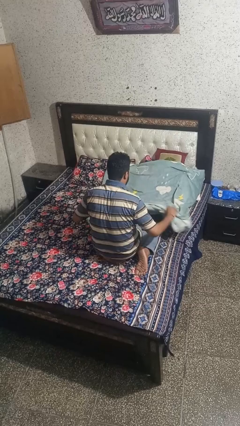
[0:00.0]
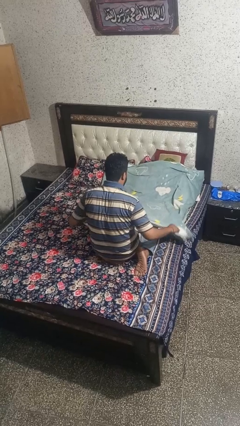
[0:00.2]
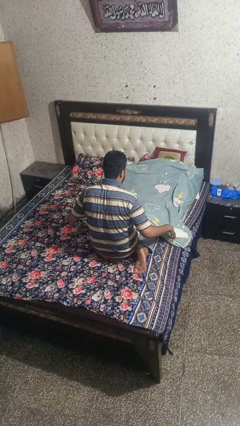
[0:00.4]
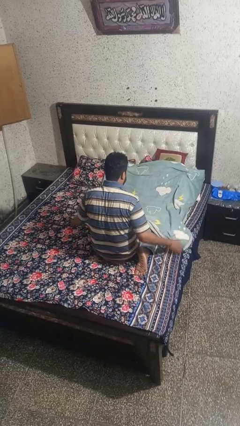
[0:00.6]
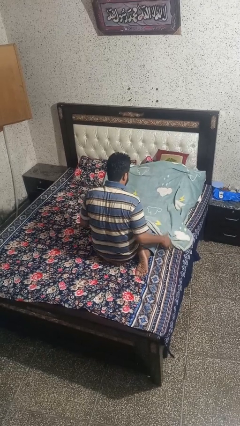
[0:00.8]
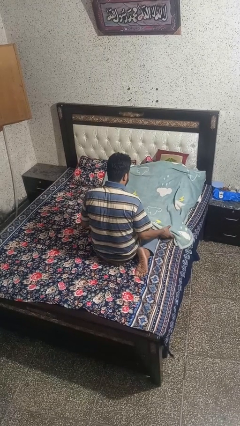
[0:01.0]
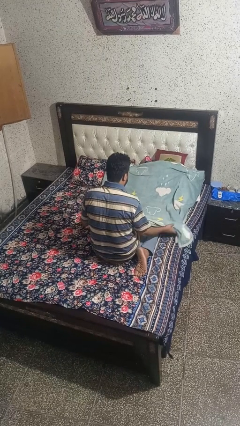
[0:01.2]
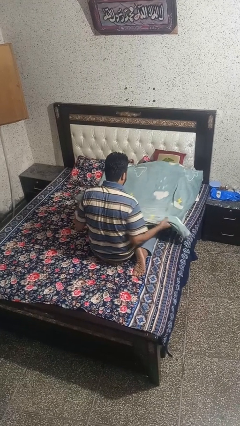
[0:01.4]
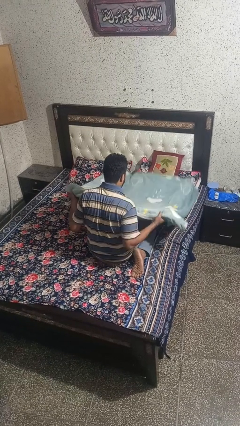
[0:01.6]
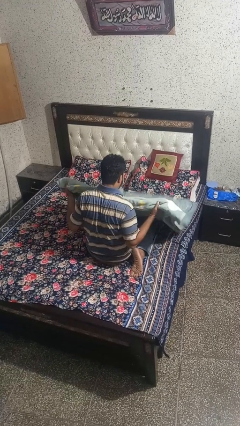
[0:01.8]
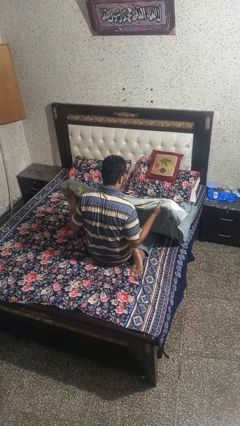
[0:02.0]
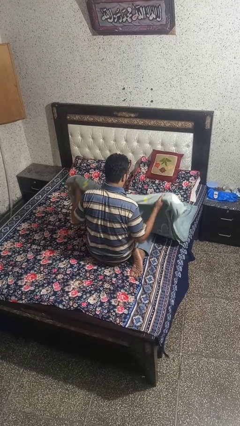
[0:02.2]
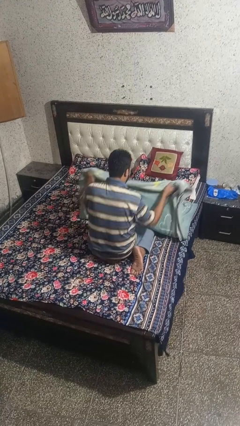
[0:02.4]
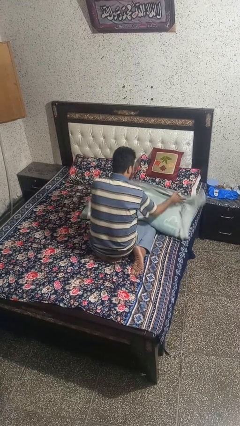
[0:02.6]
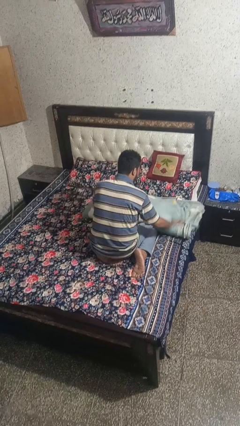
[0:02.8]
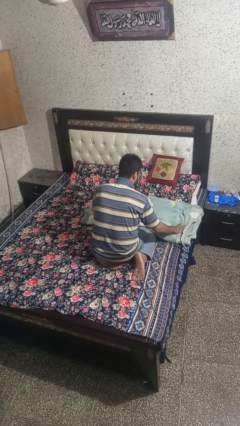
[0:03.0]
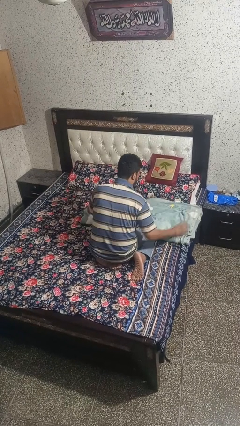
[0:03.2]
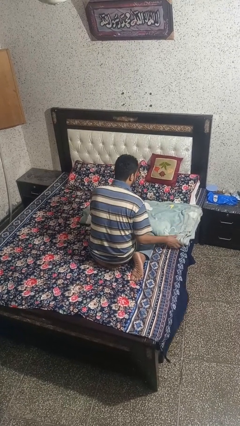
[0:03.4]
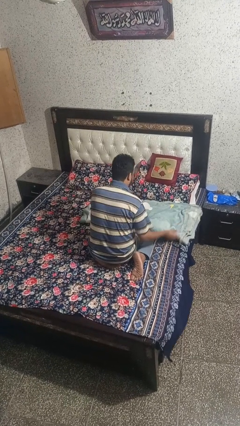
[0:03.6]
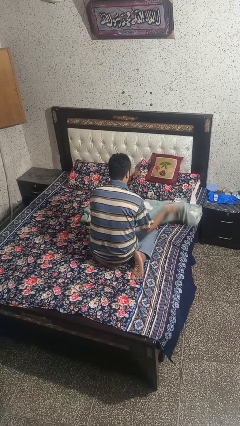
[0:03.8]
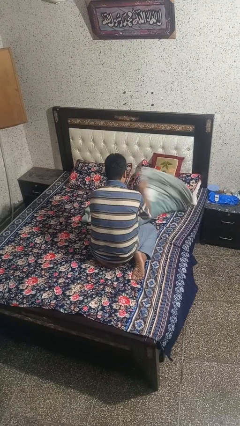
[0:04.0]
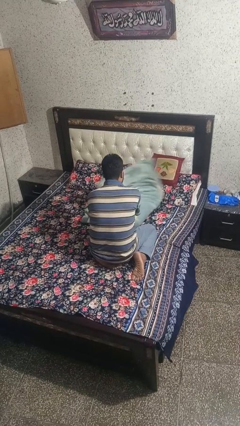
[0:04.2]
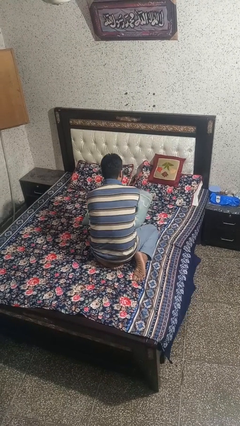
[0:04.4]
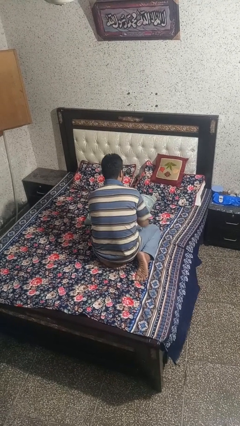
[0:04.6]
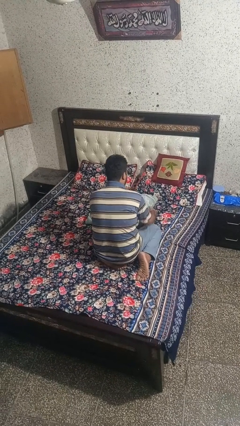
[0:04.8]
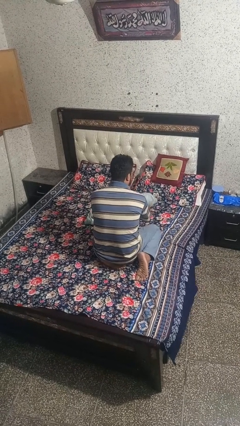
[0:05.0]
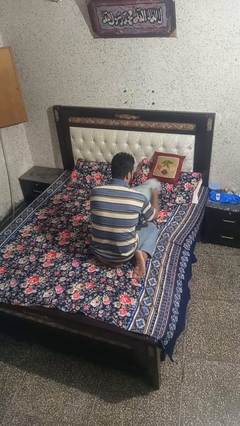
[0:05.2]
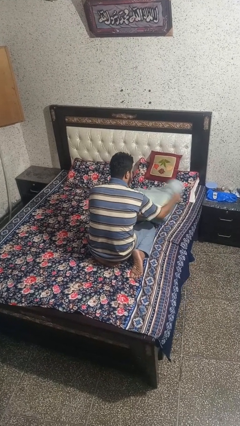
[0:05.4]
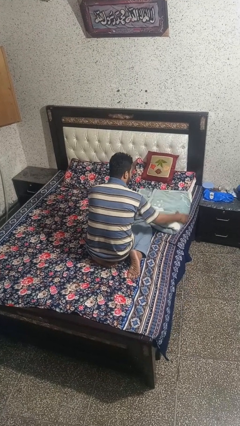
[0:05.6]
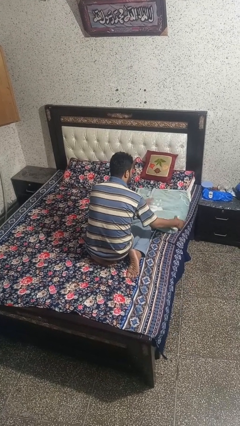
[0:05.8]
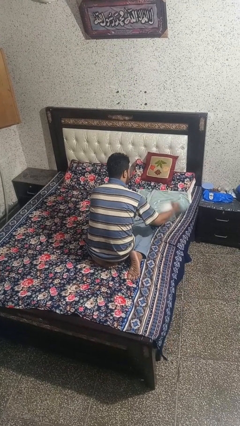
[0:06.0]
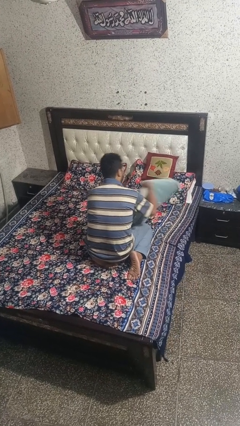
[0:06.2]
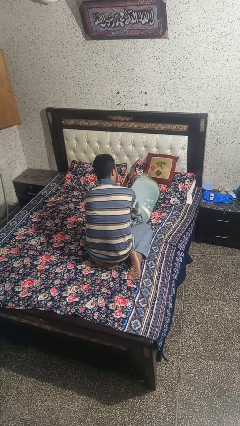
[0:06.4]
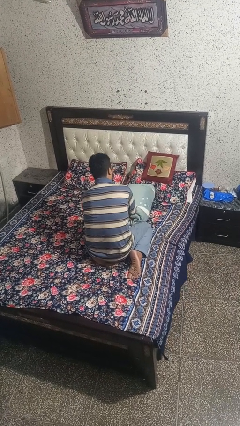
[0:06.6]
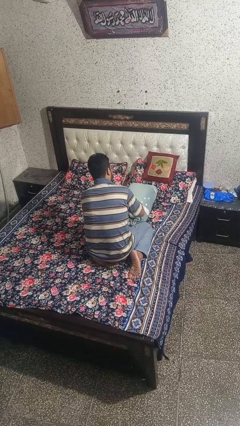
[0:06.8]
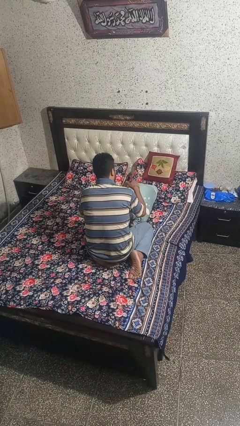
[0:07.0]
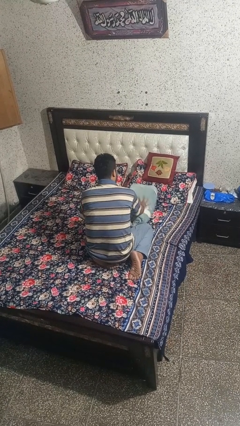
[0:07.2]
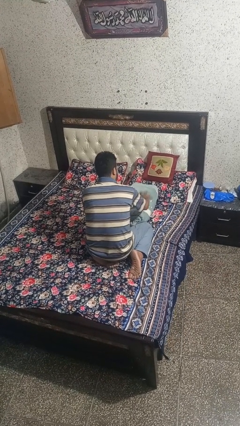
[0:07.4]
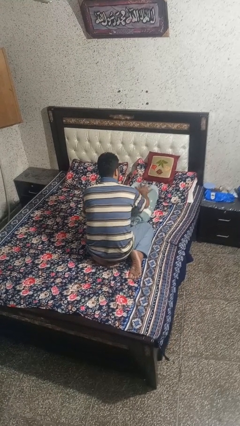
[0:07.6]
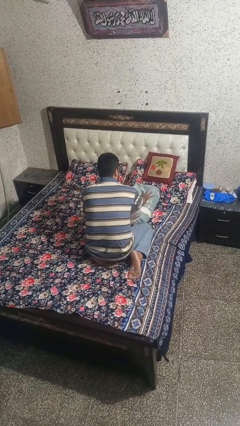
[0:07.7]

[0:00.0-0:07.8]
person folds blanket

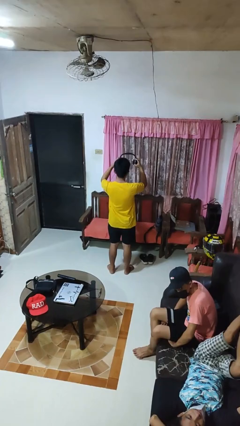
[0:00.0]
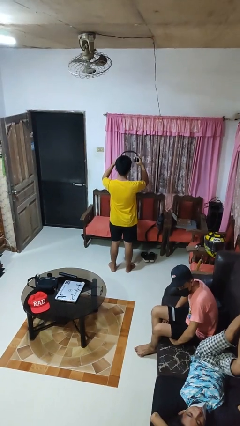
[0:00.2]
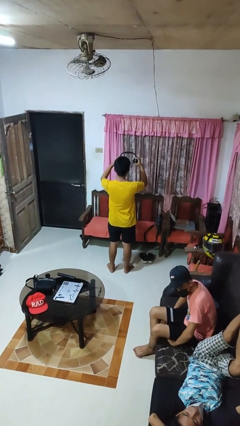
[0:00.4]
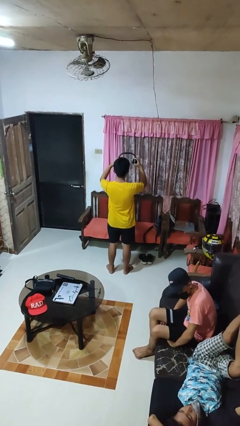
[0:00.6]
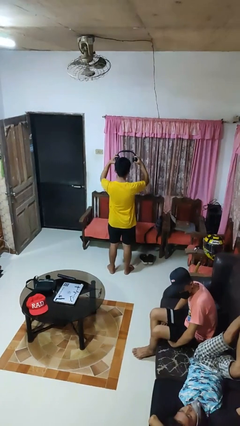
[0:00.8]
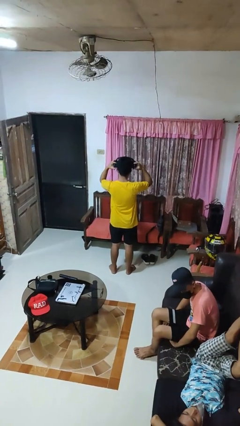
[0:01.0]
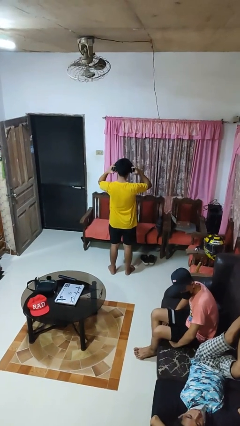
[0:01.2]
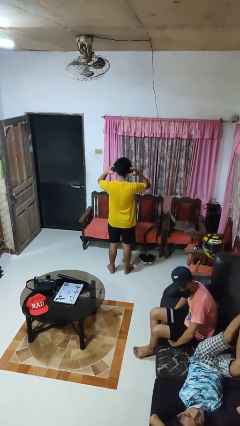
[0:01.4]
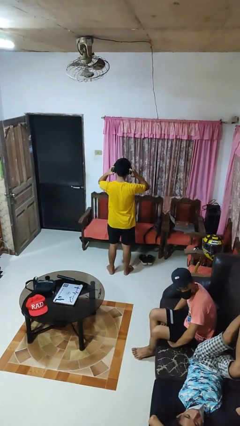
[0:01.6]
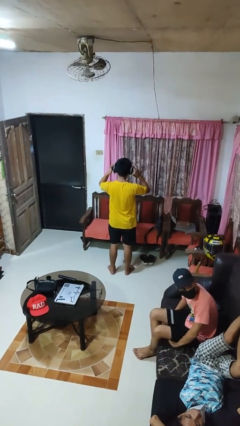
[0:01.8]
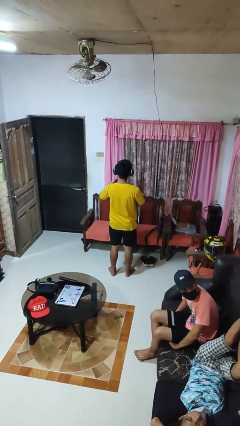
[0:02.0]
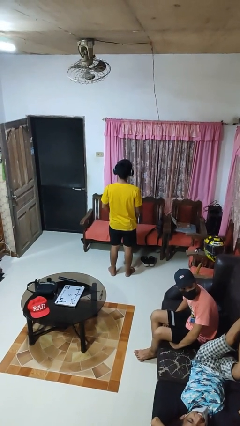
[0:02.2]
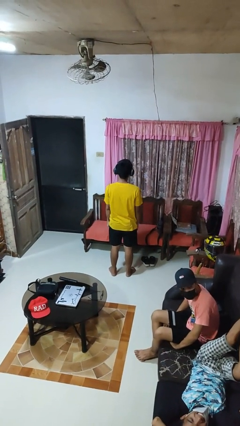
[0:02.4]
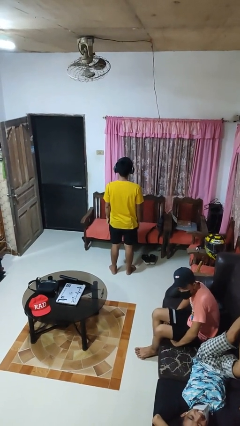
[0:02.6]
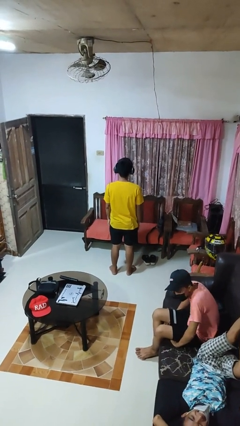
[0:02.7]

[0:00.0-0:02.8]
person puts on headphones

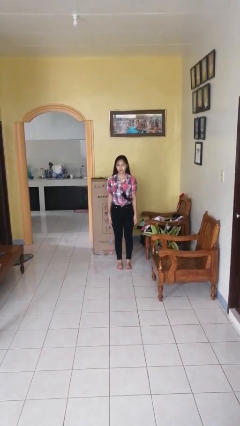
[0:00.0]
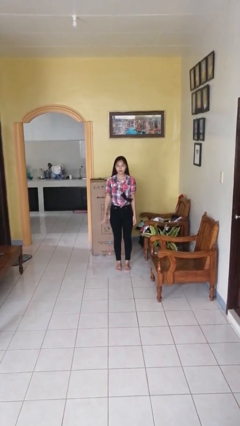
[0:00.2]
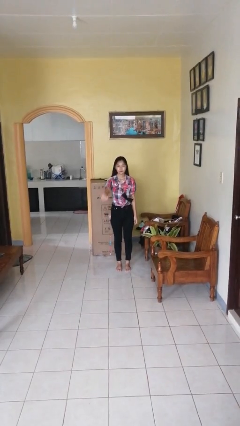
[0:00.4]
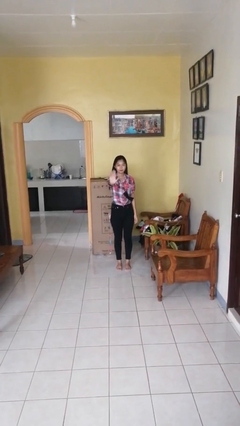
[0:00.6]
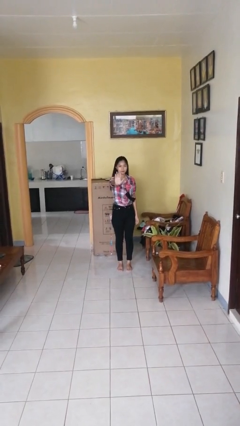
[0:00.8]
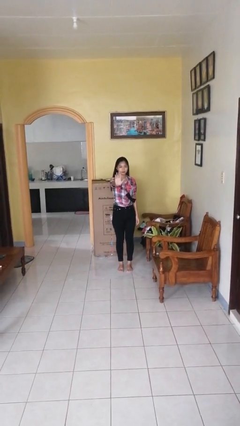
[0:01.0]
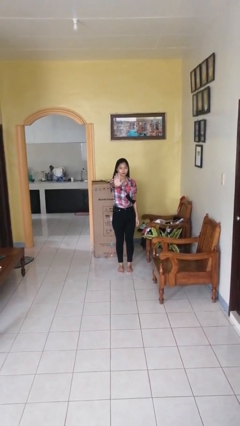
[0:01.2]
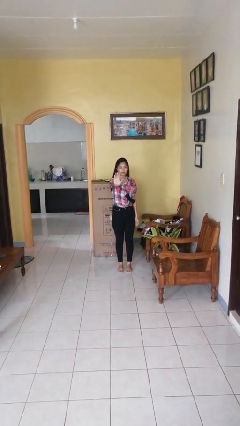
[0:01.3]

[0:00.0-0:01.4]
person gestures stop

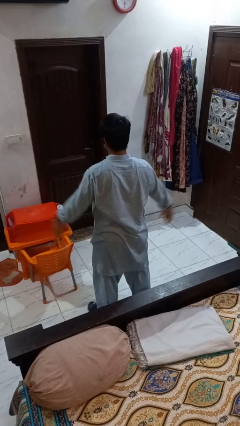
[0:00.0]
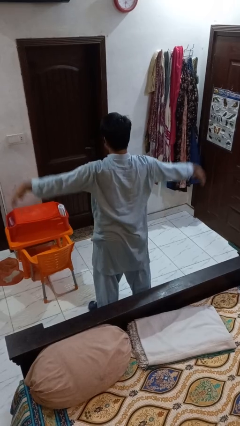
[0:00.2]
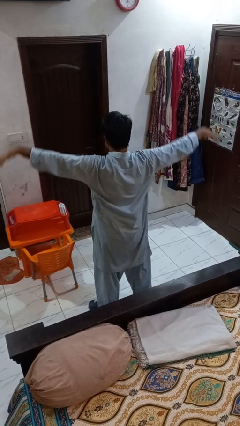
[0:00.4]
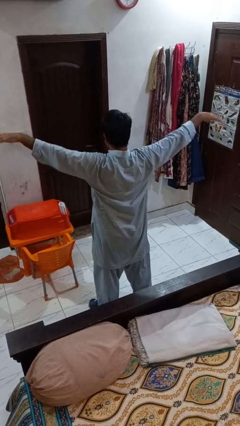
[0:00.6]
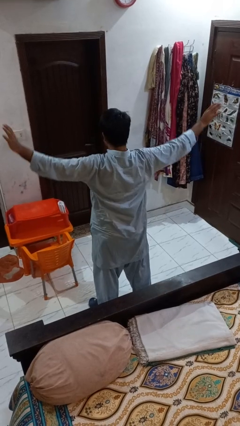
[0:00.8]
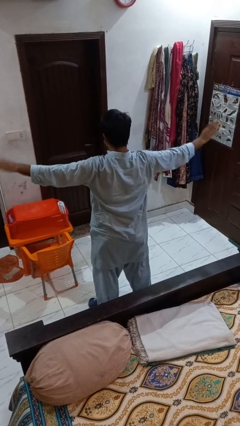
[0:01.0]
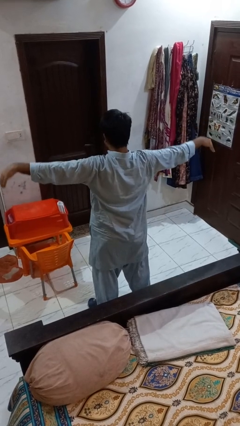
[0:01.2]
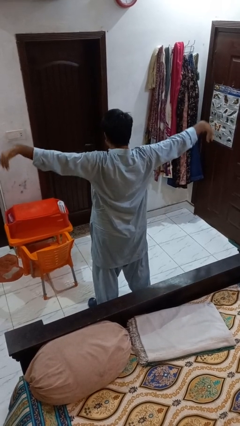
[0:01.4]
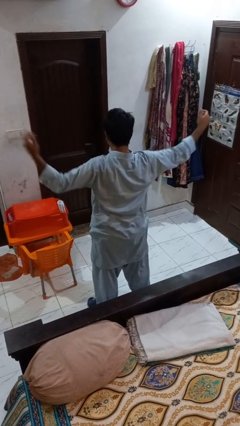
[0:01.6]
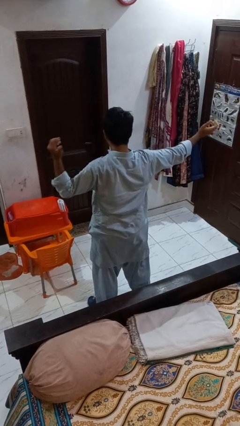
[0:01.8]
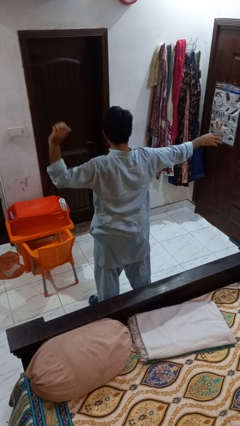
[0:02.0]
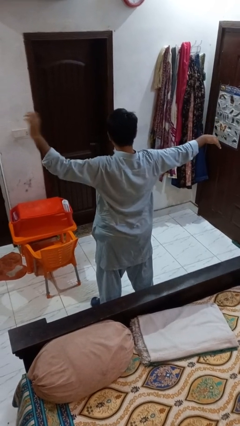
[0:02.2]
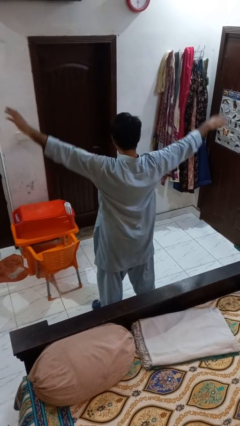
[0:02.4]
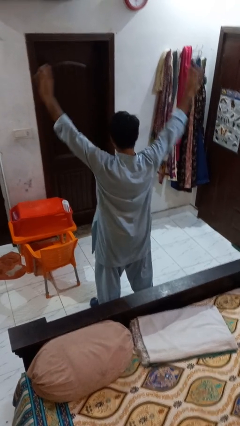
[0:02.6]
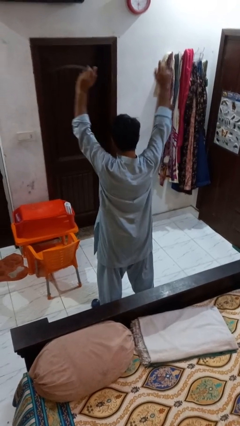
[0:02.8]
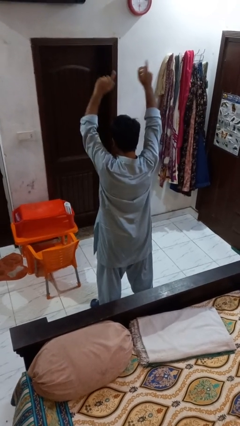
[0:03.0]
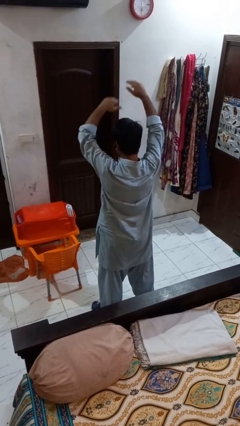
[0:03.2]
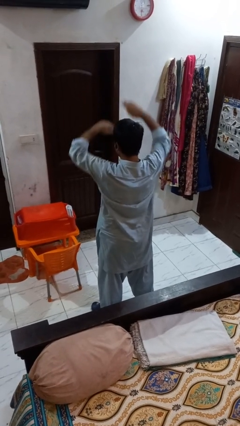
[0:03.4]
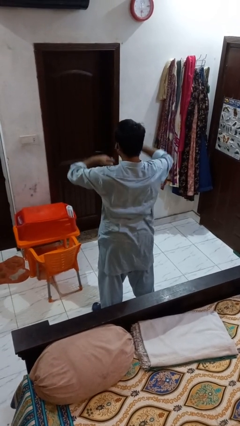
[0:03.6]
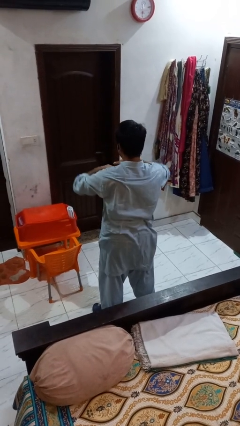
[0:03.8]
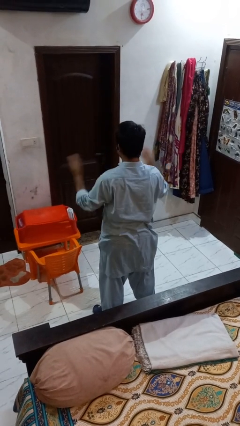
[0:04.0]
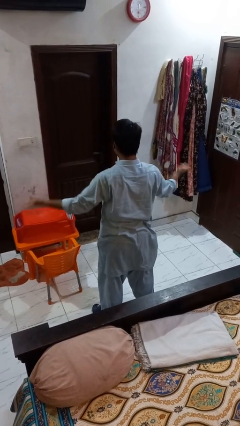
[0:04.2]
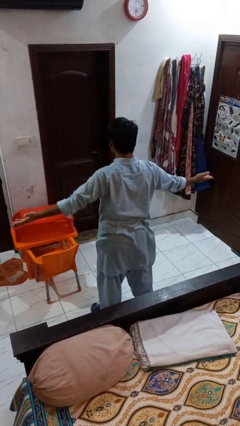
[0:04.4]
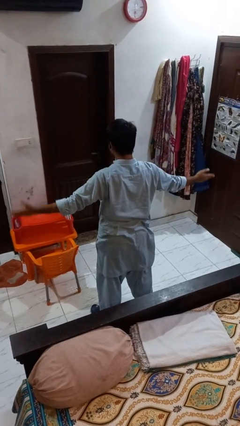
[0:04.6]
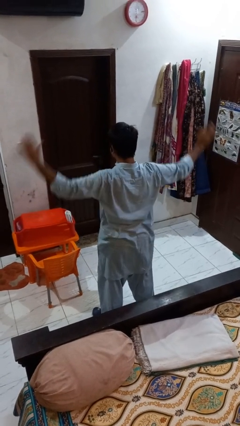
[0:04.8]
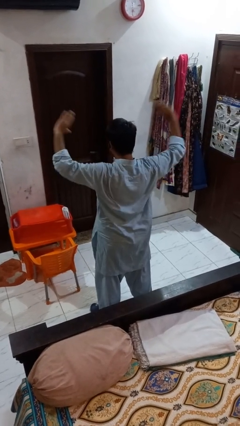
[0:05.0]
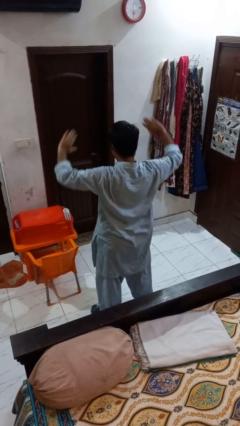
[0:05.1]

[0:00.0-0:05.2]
person dances in place

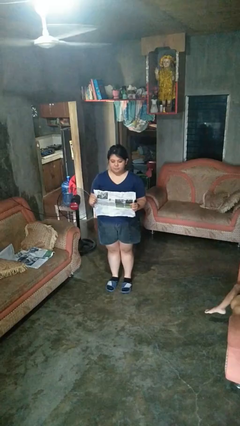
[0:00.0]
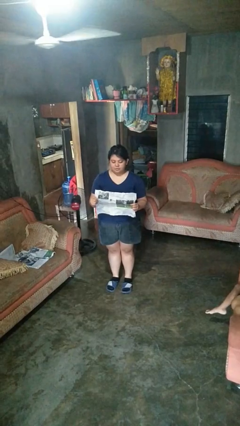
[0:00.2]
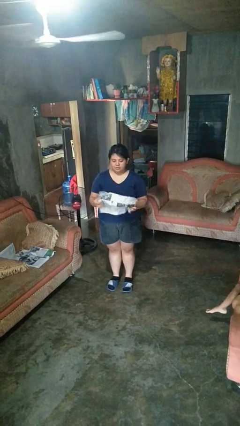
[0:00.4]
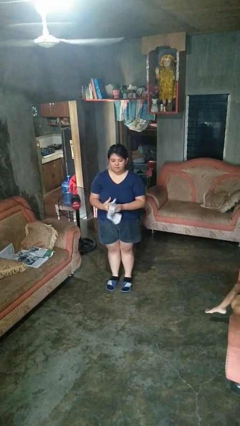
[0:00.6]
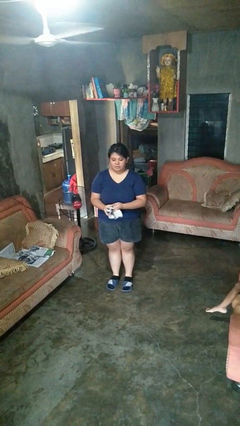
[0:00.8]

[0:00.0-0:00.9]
person crumples paper
